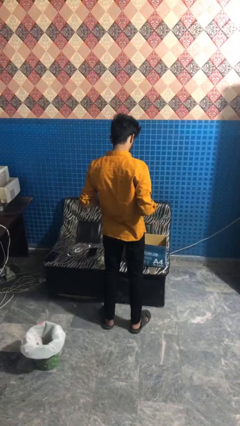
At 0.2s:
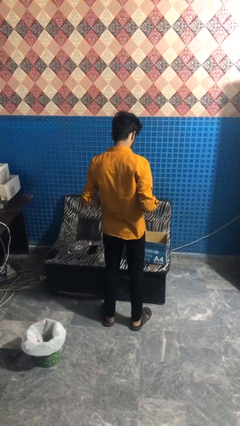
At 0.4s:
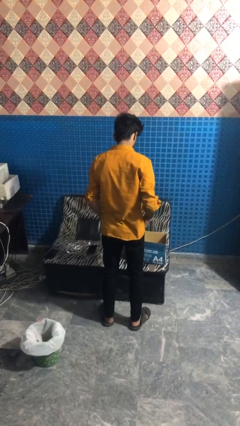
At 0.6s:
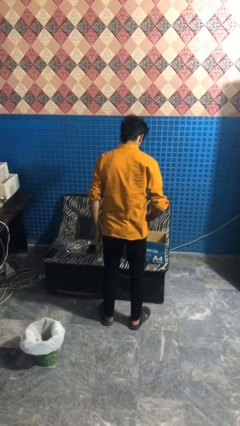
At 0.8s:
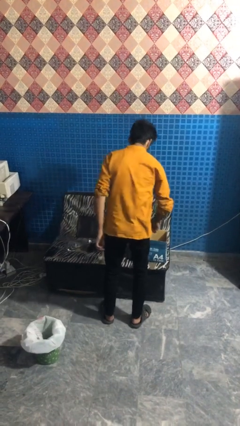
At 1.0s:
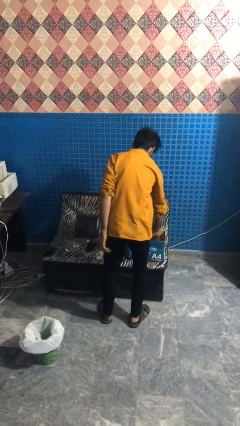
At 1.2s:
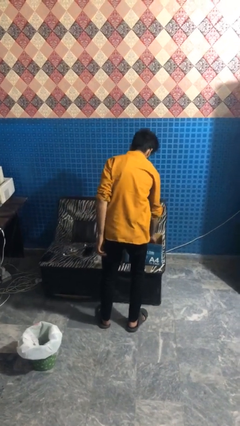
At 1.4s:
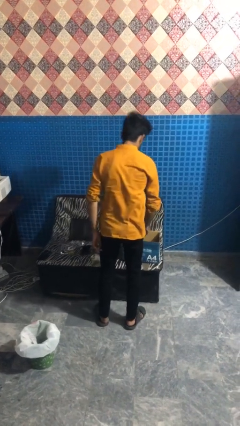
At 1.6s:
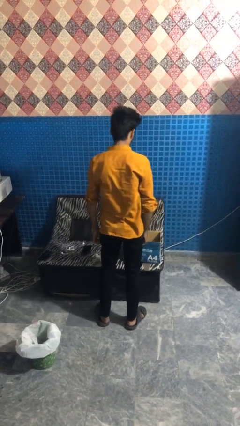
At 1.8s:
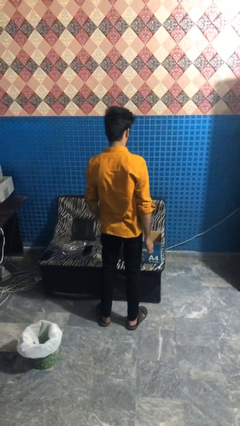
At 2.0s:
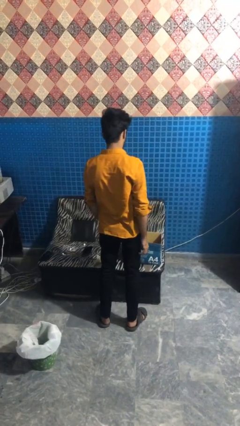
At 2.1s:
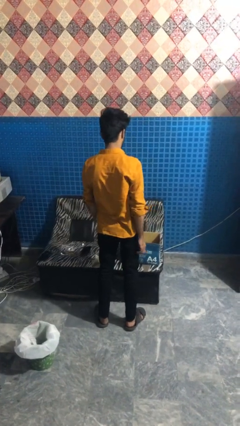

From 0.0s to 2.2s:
person puts object into box

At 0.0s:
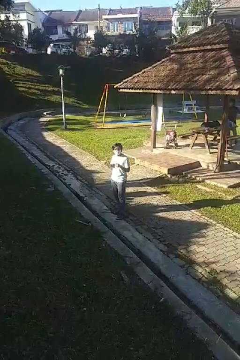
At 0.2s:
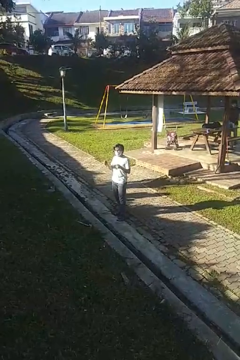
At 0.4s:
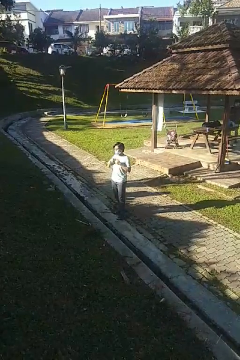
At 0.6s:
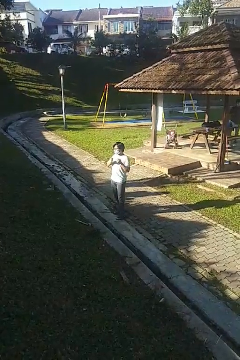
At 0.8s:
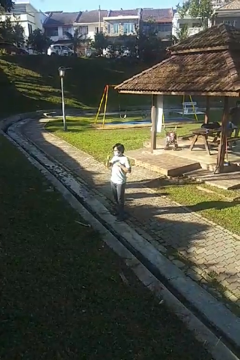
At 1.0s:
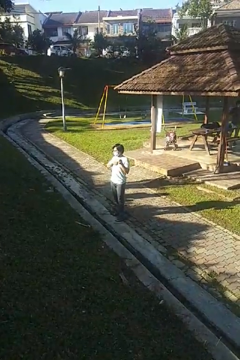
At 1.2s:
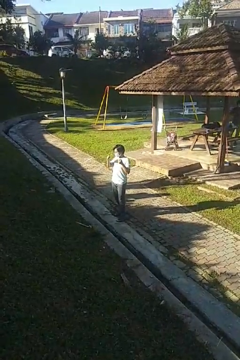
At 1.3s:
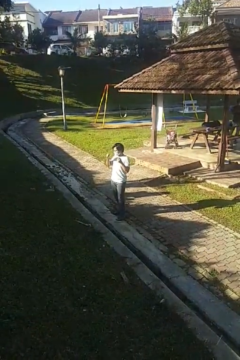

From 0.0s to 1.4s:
person drums on chest

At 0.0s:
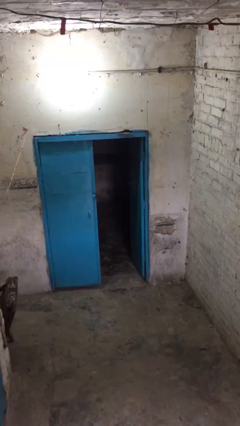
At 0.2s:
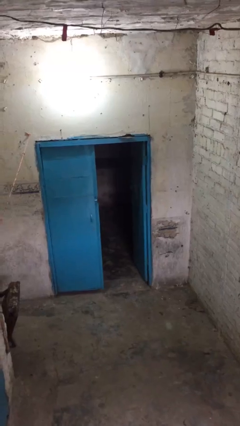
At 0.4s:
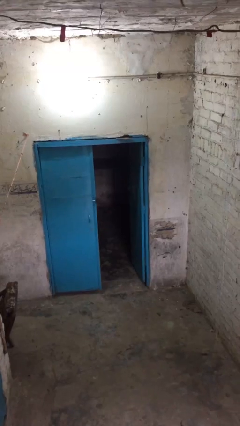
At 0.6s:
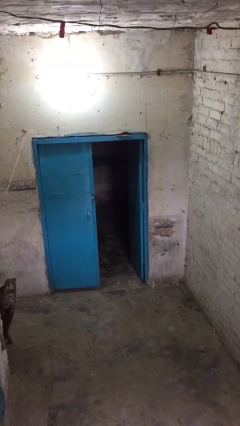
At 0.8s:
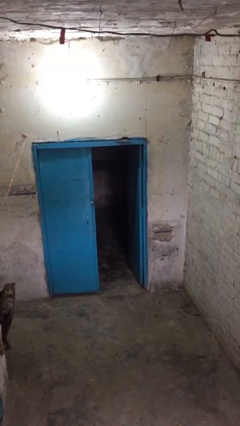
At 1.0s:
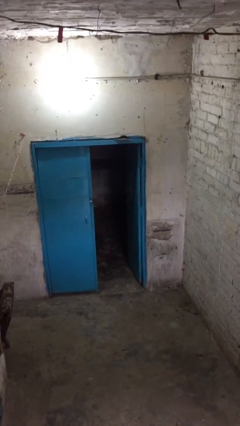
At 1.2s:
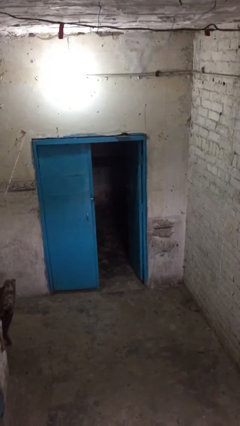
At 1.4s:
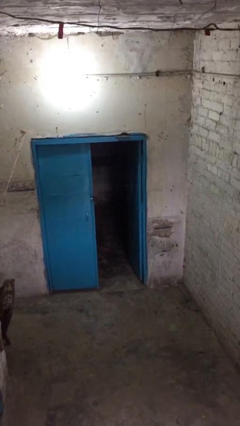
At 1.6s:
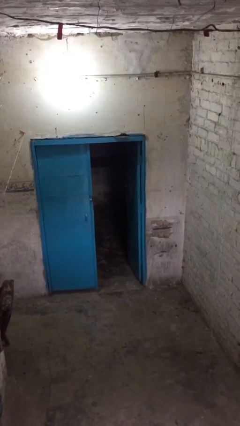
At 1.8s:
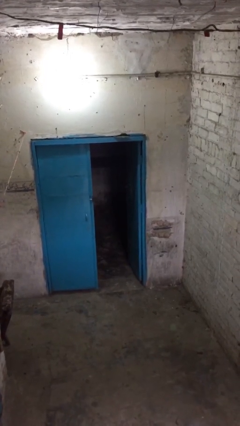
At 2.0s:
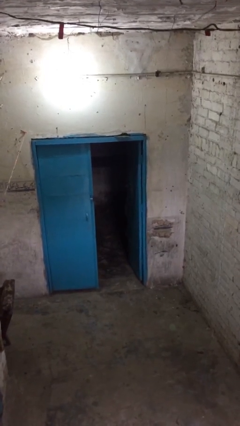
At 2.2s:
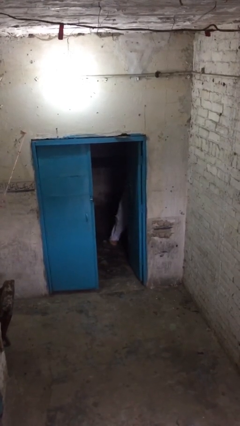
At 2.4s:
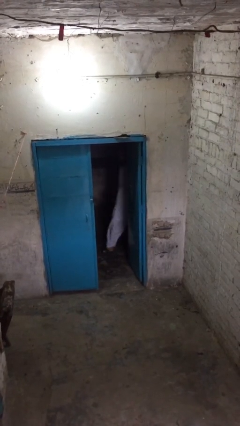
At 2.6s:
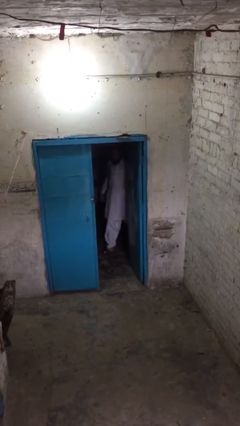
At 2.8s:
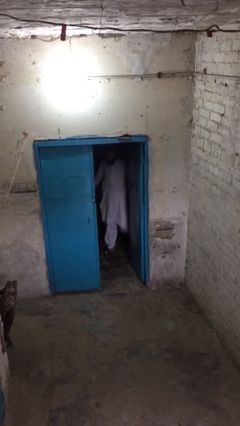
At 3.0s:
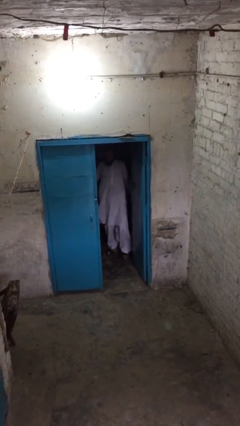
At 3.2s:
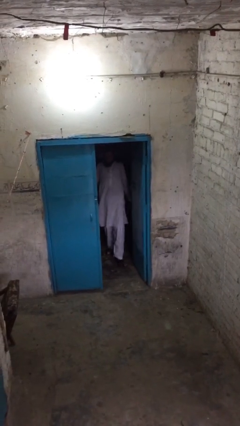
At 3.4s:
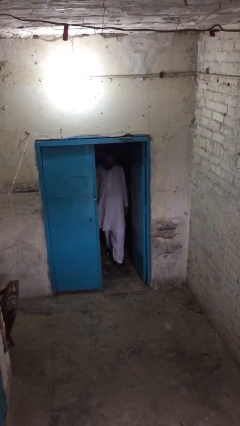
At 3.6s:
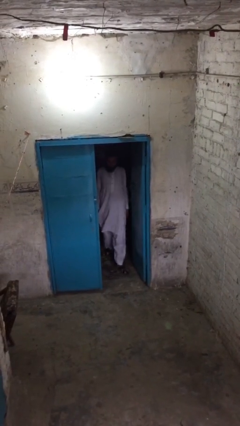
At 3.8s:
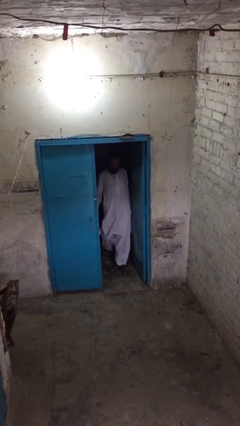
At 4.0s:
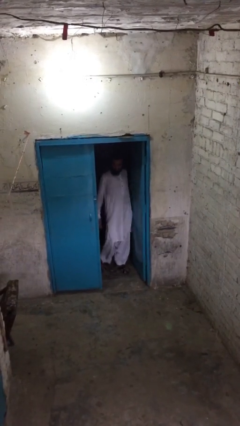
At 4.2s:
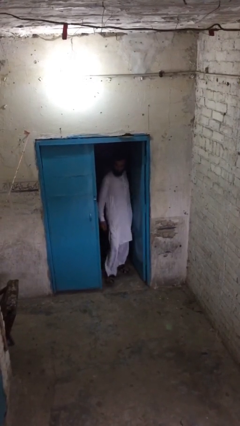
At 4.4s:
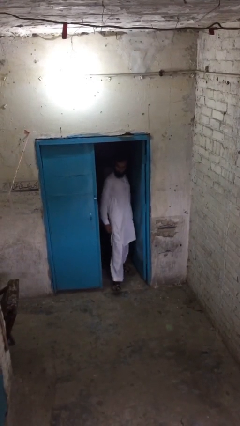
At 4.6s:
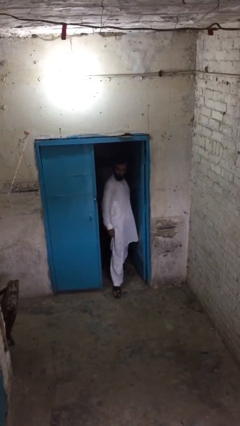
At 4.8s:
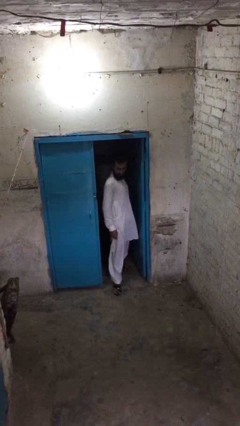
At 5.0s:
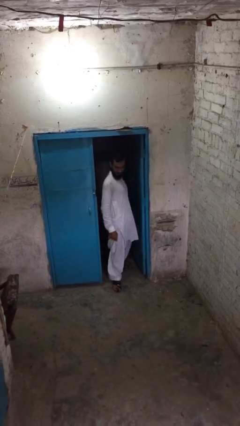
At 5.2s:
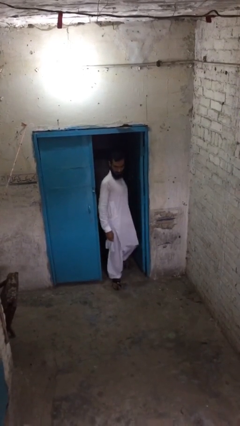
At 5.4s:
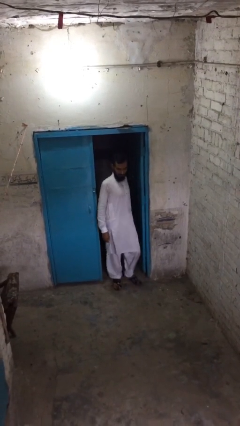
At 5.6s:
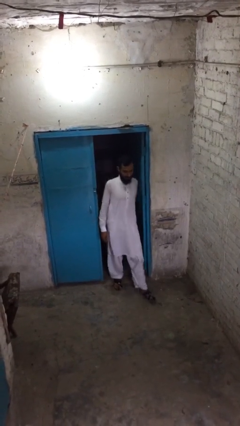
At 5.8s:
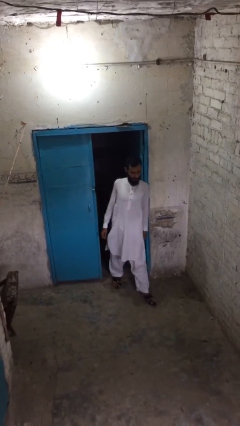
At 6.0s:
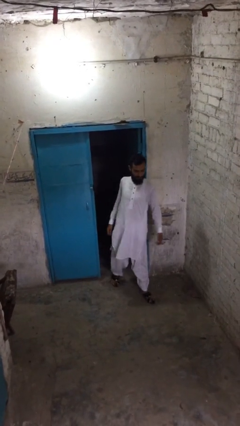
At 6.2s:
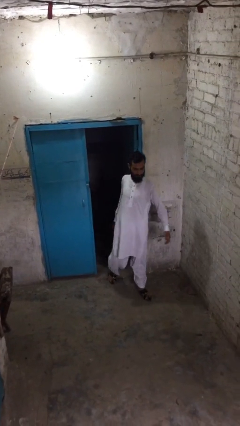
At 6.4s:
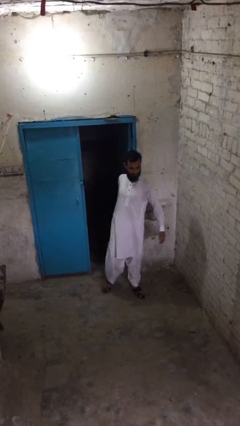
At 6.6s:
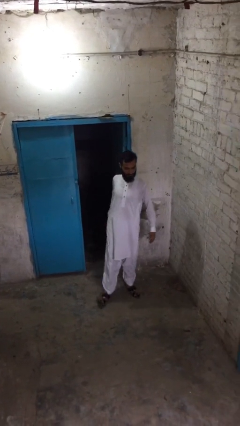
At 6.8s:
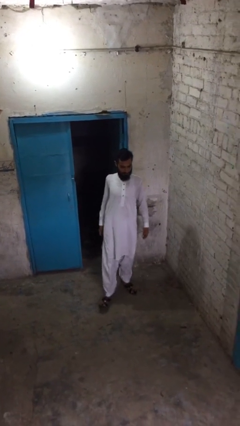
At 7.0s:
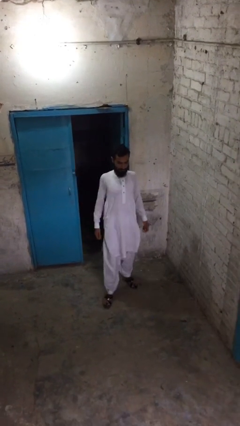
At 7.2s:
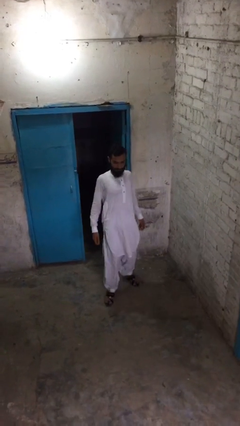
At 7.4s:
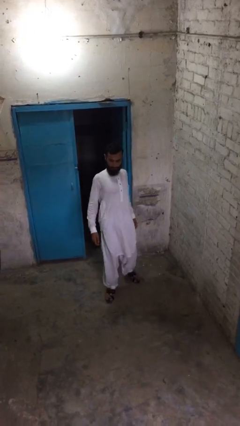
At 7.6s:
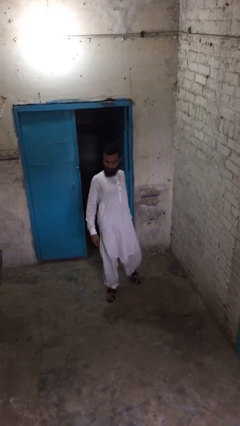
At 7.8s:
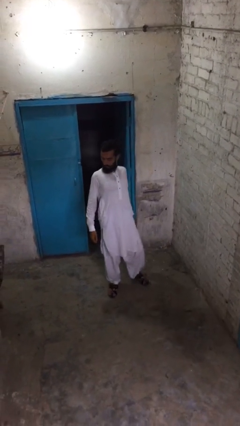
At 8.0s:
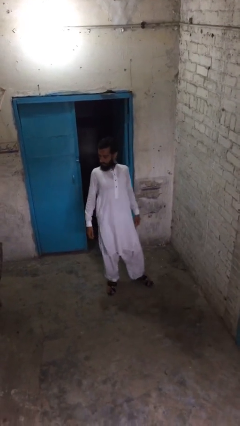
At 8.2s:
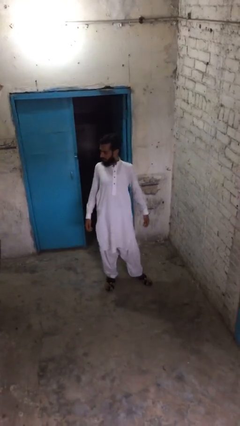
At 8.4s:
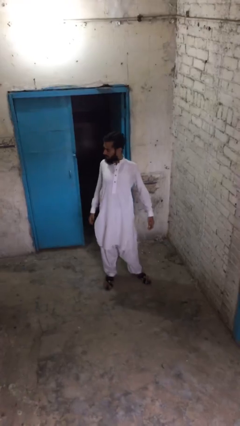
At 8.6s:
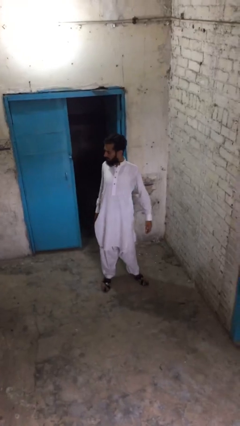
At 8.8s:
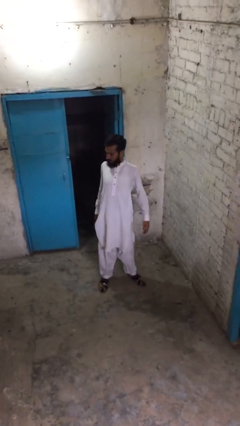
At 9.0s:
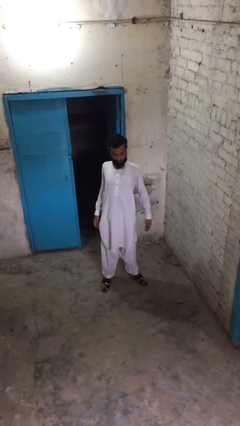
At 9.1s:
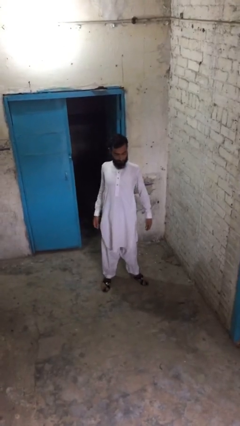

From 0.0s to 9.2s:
person enters scene through structure

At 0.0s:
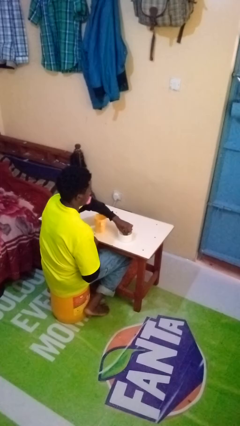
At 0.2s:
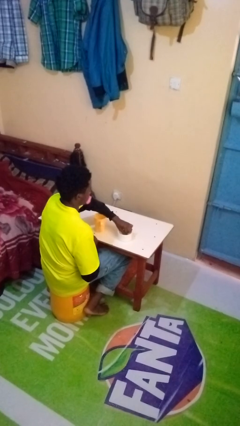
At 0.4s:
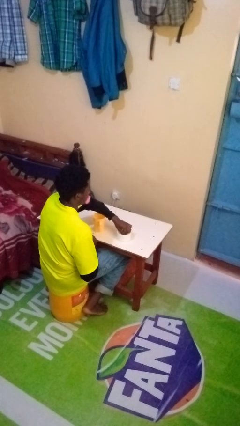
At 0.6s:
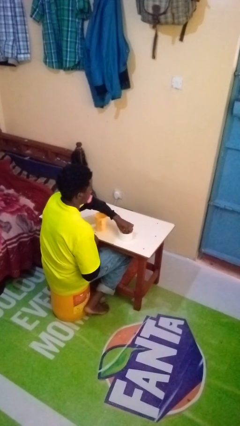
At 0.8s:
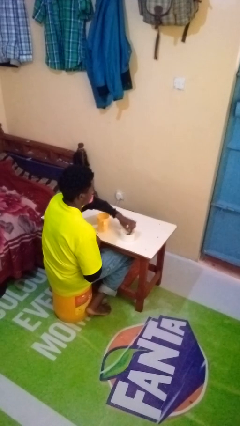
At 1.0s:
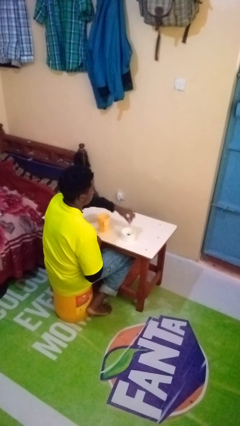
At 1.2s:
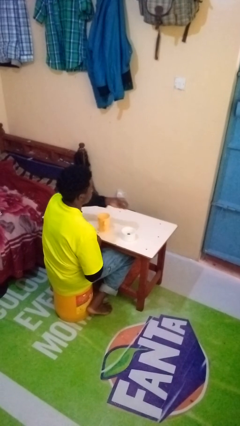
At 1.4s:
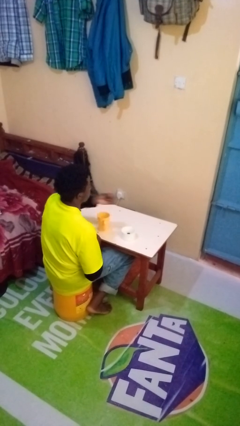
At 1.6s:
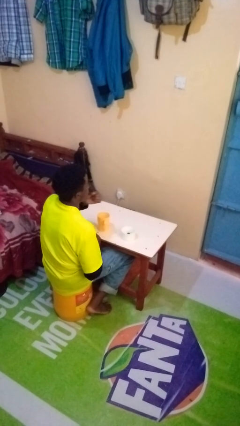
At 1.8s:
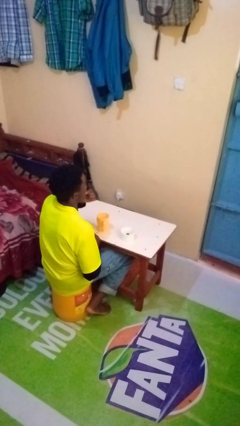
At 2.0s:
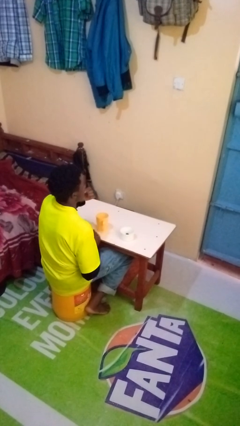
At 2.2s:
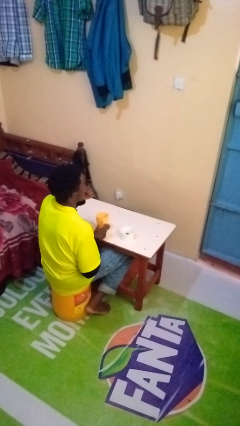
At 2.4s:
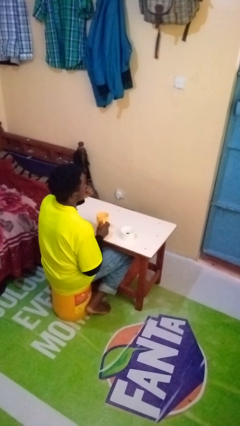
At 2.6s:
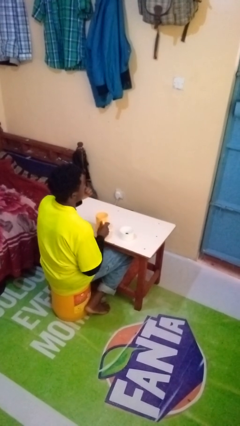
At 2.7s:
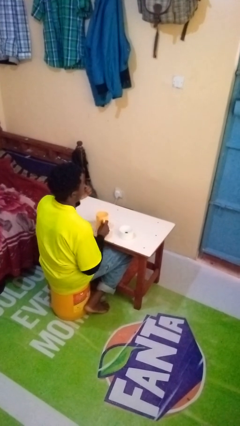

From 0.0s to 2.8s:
person takes medicine pills

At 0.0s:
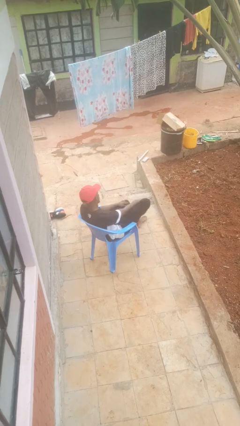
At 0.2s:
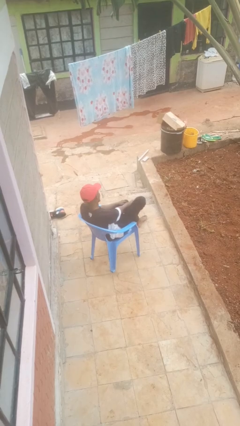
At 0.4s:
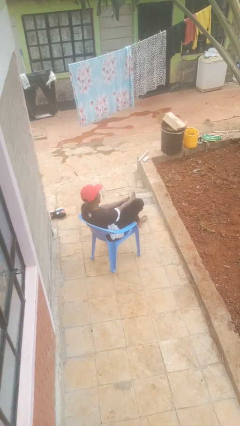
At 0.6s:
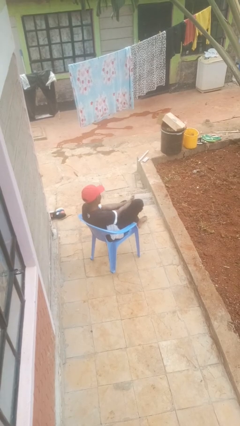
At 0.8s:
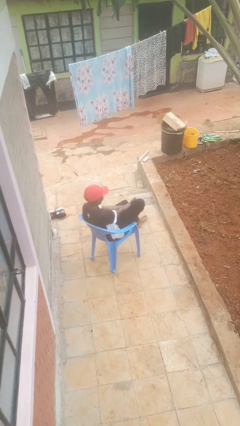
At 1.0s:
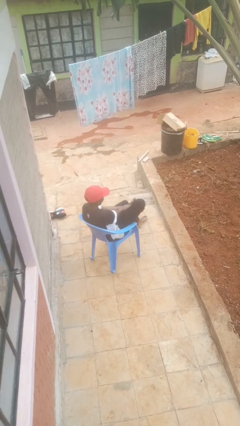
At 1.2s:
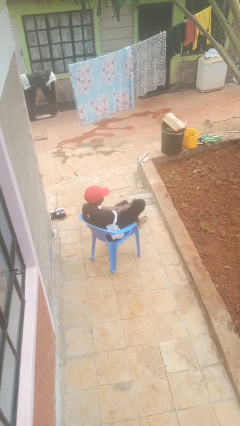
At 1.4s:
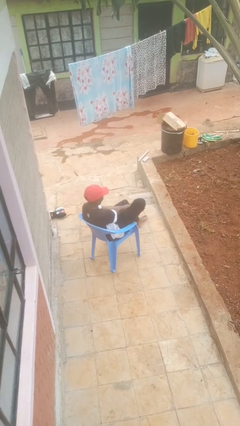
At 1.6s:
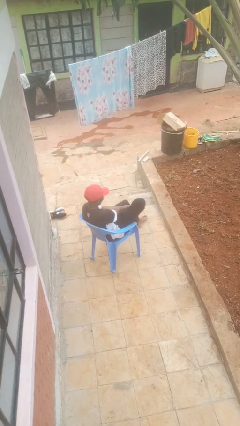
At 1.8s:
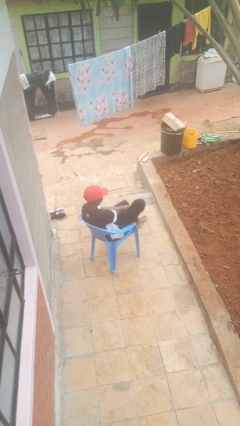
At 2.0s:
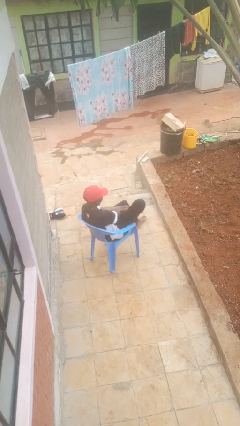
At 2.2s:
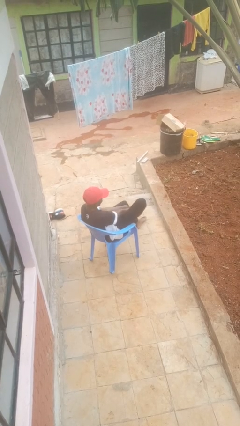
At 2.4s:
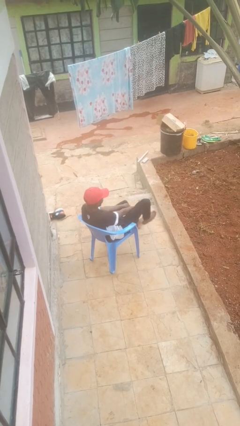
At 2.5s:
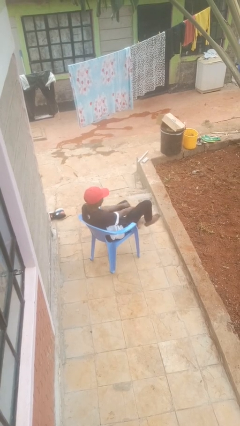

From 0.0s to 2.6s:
person rubs foot
